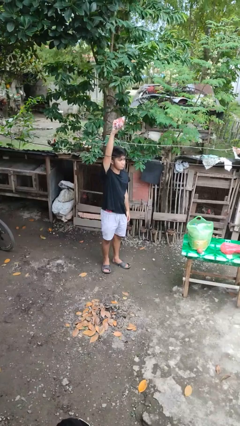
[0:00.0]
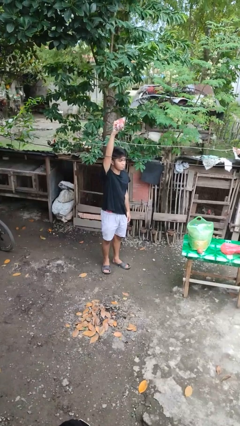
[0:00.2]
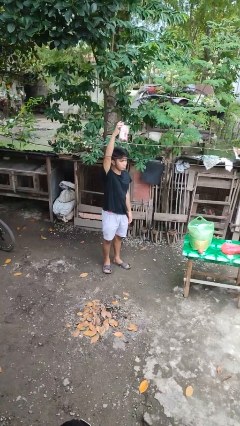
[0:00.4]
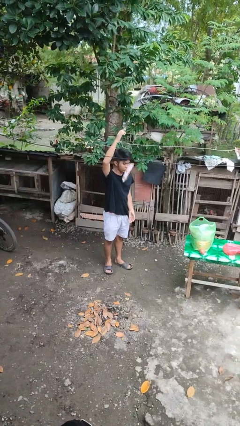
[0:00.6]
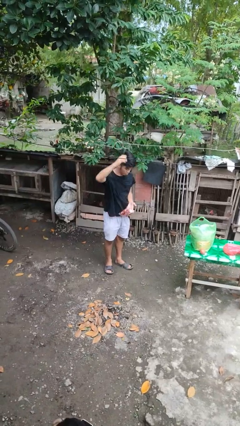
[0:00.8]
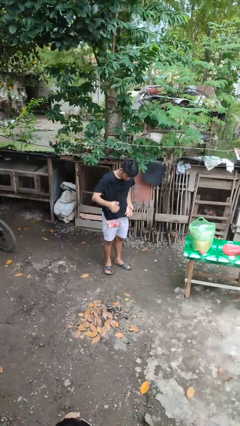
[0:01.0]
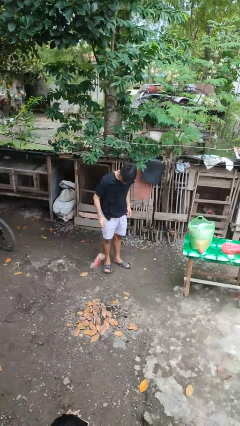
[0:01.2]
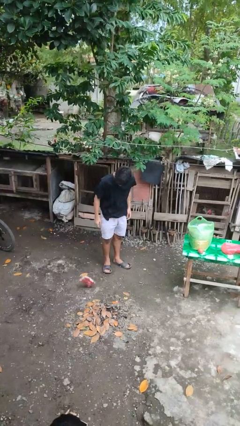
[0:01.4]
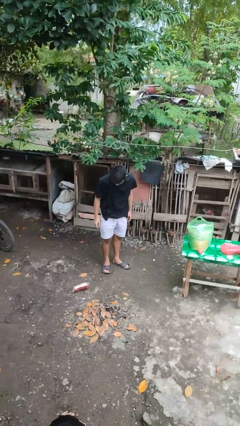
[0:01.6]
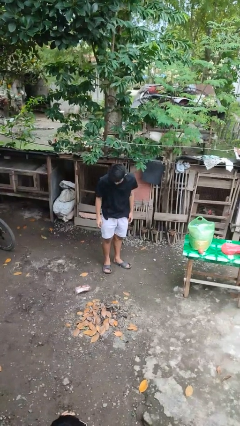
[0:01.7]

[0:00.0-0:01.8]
person drops object

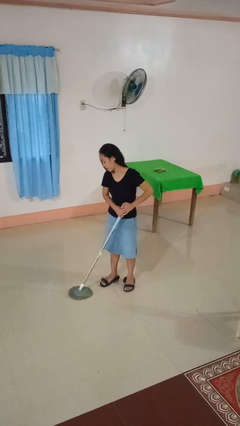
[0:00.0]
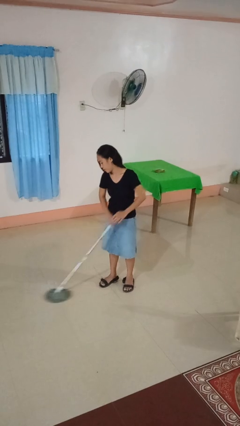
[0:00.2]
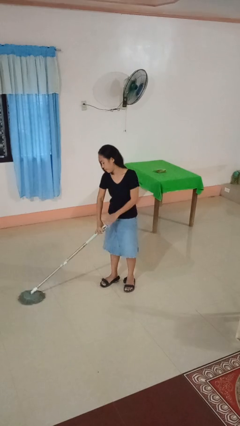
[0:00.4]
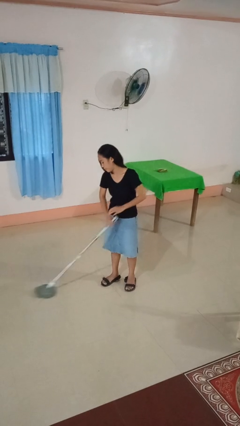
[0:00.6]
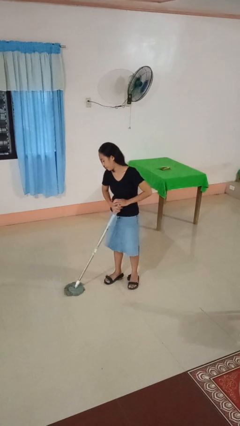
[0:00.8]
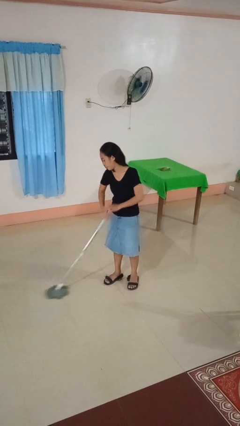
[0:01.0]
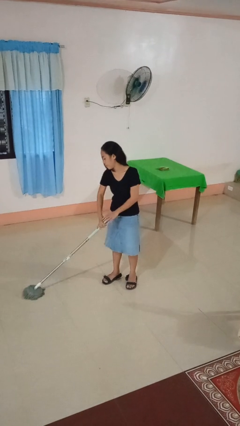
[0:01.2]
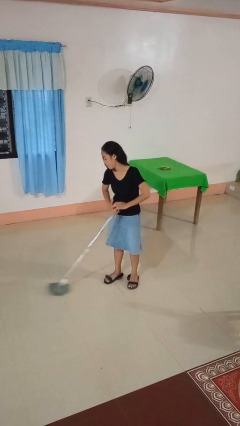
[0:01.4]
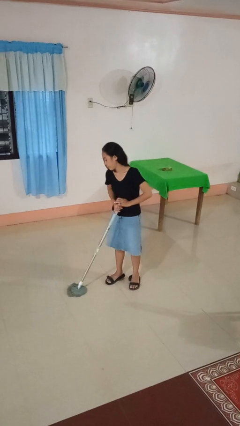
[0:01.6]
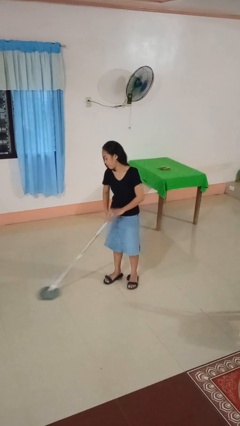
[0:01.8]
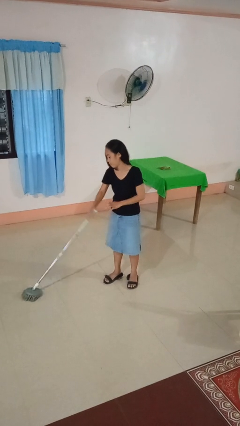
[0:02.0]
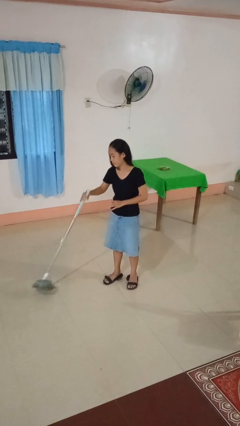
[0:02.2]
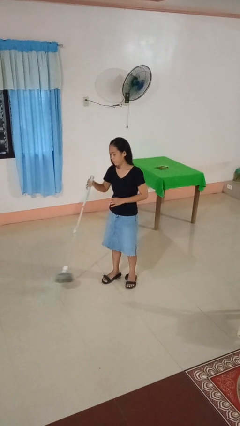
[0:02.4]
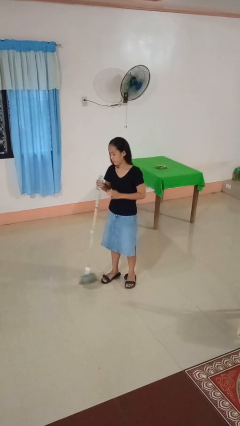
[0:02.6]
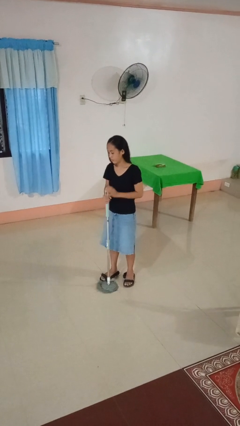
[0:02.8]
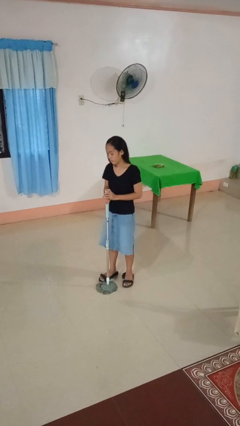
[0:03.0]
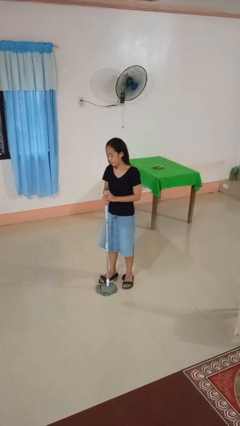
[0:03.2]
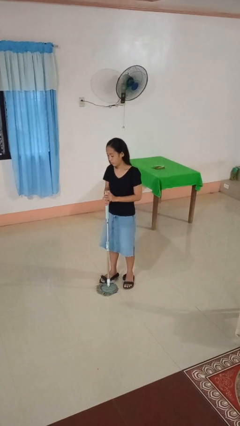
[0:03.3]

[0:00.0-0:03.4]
person mops

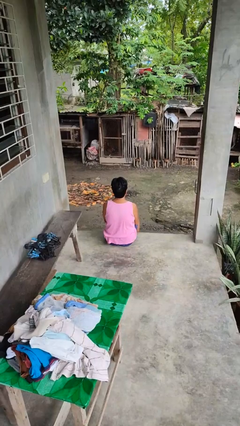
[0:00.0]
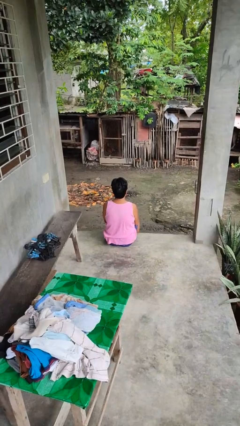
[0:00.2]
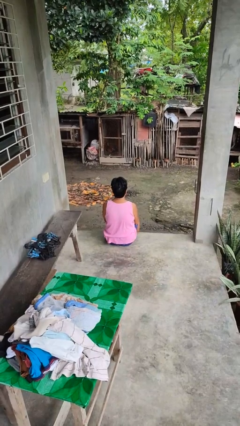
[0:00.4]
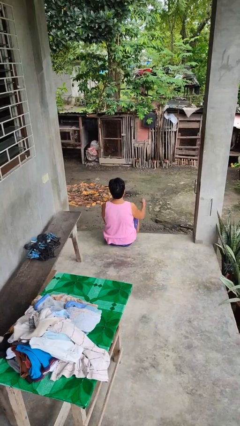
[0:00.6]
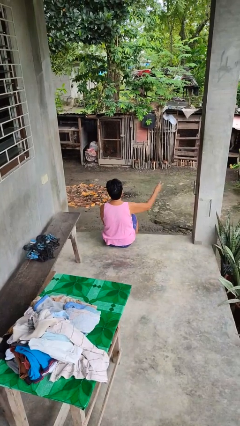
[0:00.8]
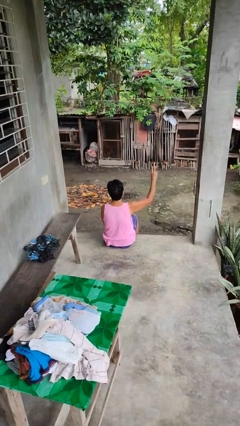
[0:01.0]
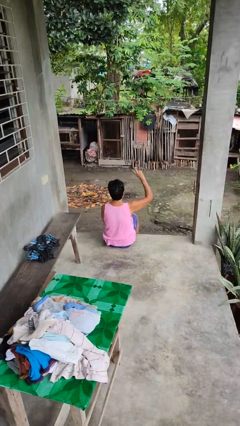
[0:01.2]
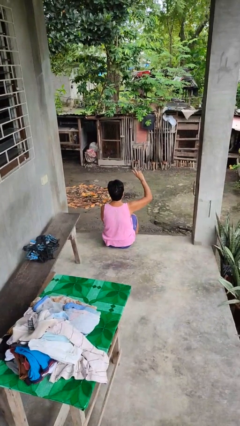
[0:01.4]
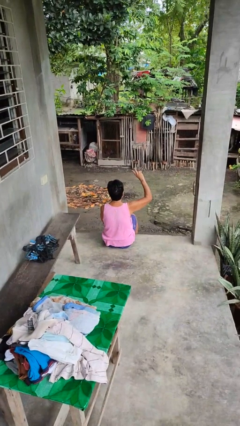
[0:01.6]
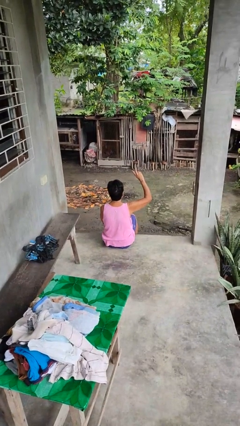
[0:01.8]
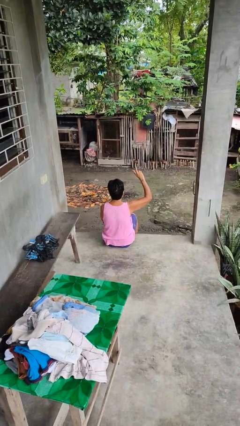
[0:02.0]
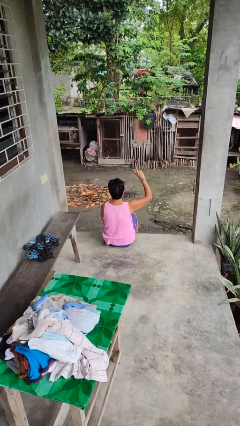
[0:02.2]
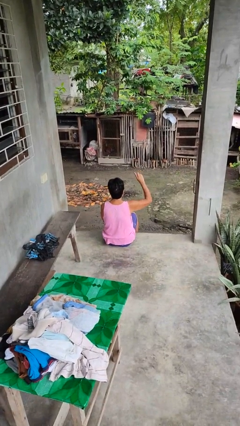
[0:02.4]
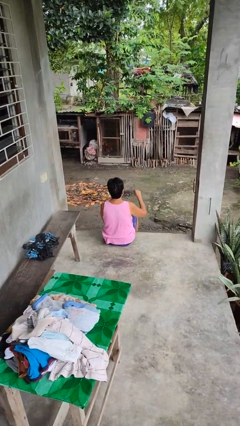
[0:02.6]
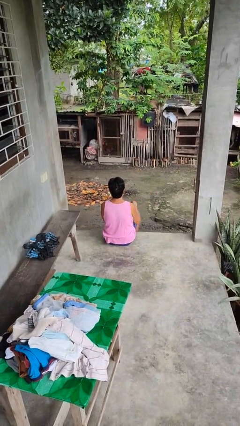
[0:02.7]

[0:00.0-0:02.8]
person gestures peace

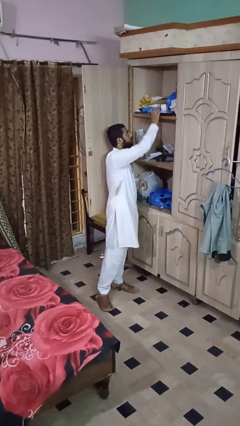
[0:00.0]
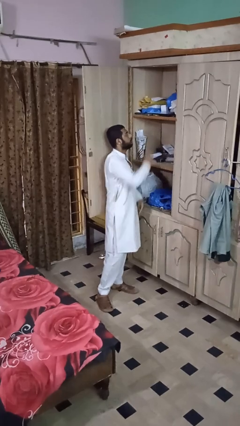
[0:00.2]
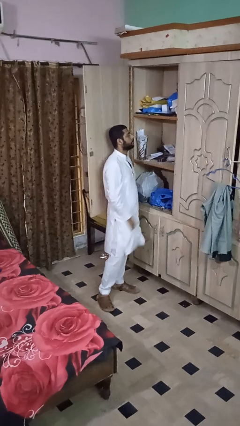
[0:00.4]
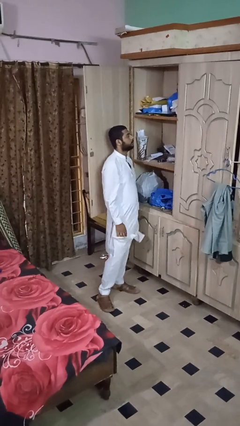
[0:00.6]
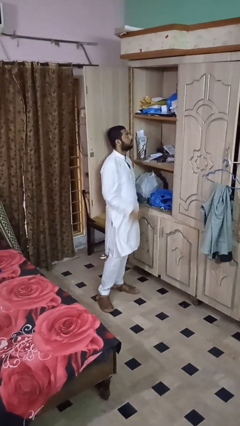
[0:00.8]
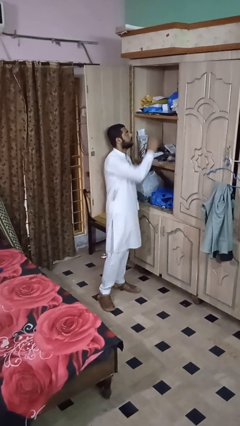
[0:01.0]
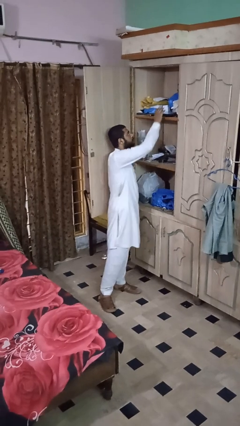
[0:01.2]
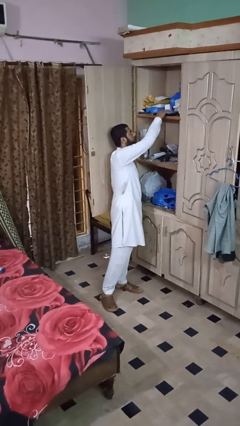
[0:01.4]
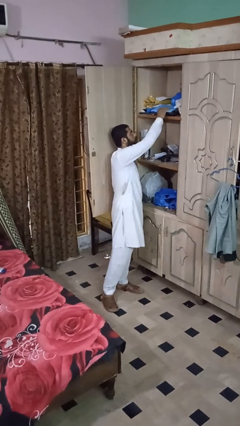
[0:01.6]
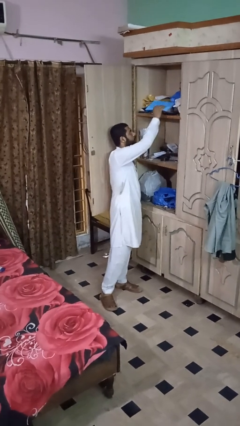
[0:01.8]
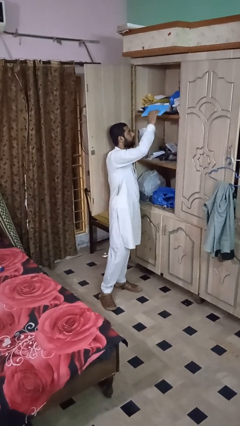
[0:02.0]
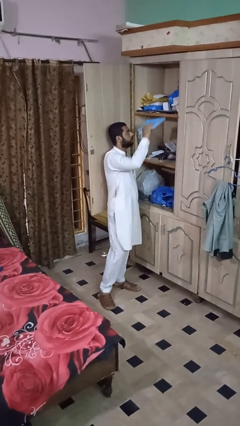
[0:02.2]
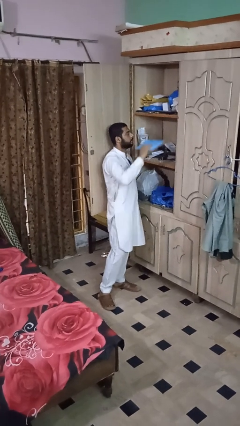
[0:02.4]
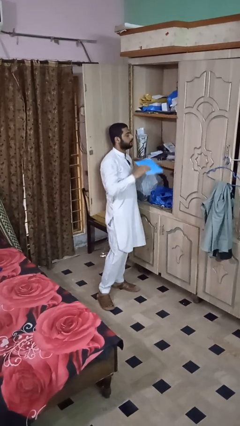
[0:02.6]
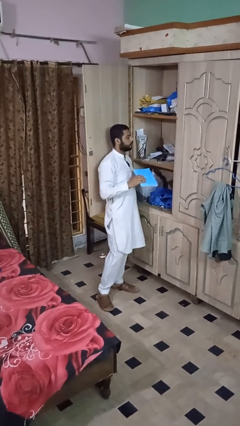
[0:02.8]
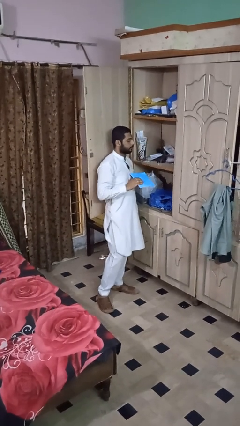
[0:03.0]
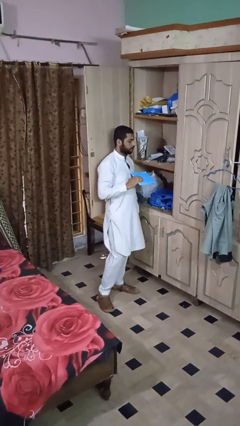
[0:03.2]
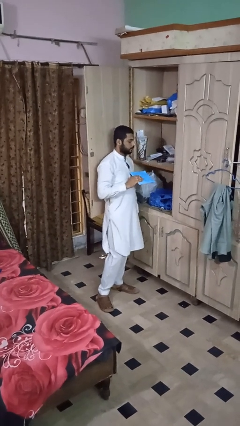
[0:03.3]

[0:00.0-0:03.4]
person picks up object from shelf

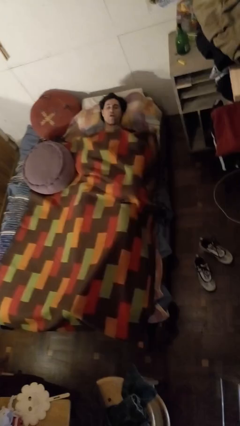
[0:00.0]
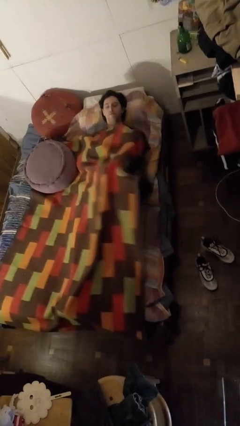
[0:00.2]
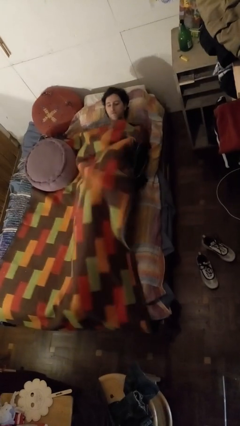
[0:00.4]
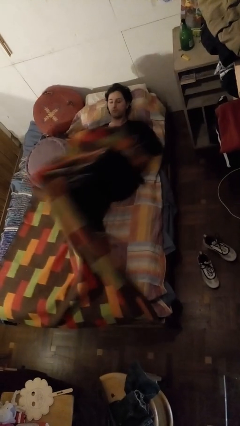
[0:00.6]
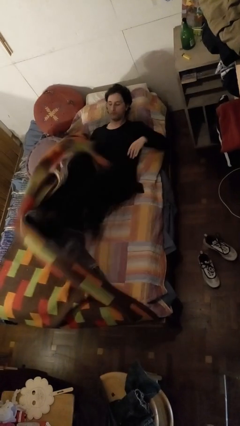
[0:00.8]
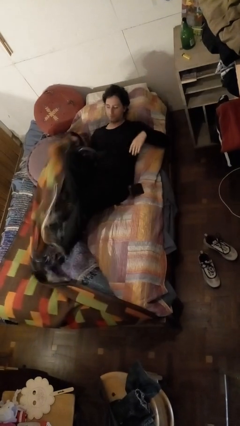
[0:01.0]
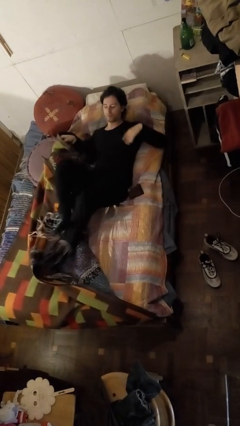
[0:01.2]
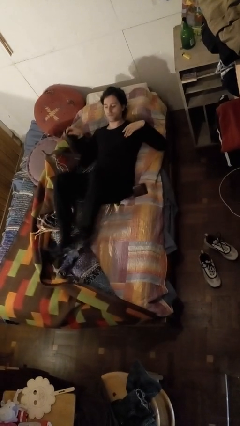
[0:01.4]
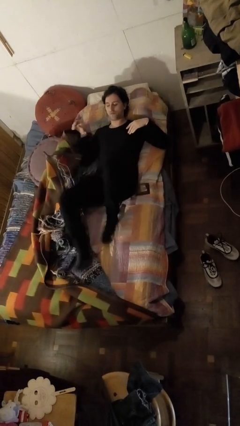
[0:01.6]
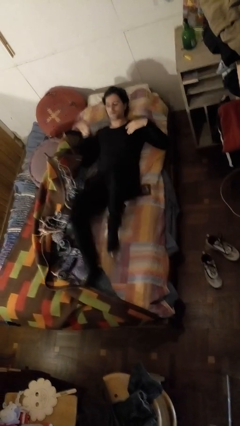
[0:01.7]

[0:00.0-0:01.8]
person uncovers with bedsheets

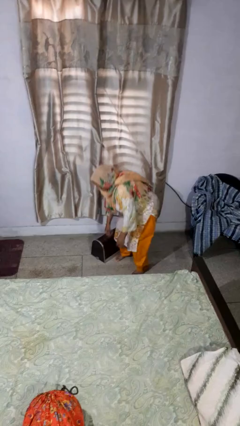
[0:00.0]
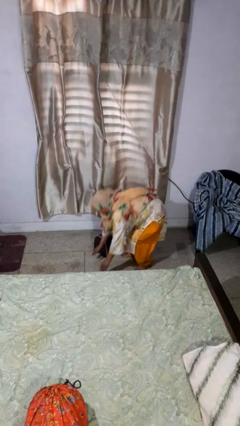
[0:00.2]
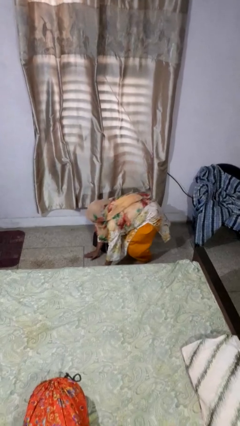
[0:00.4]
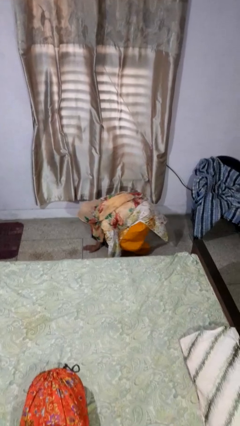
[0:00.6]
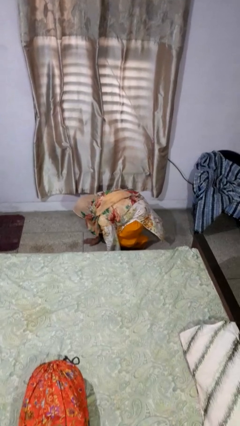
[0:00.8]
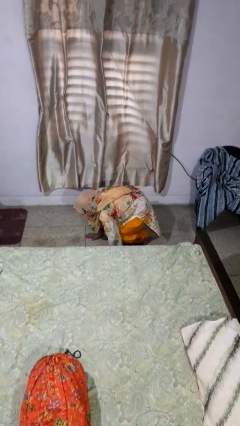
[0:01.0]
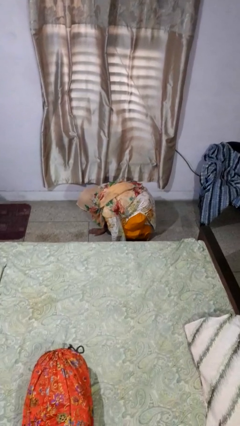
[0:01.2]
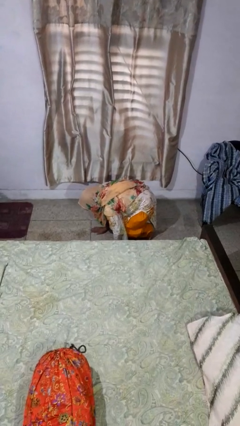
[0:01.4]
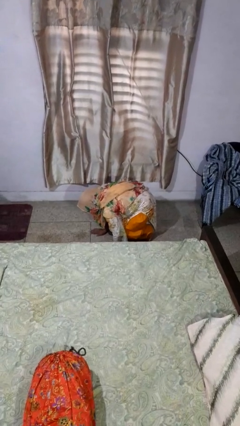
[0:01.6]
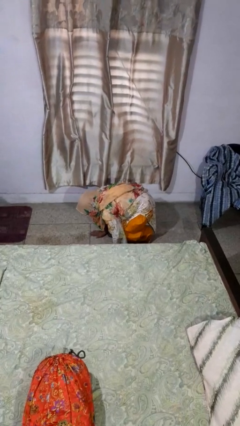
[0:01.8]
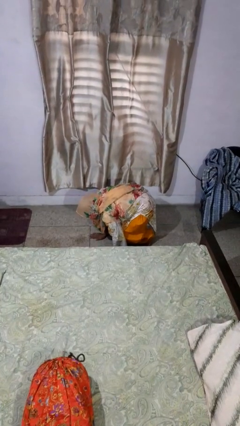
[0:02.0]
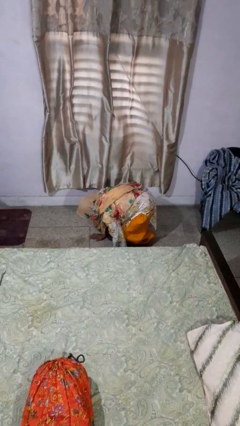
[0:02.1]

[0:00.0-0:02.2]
person lies down on floor

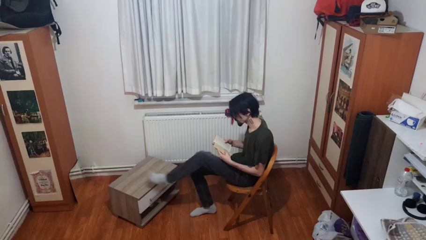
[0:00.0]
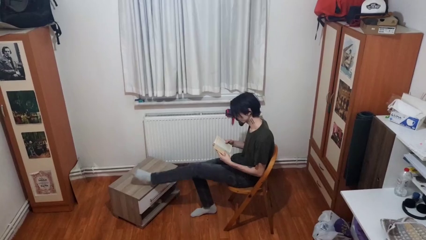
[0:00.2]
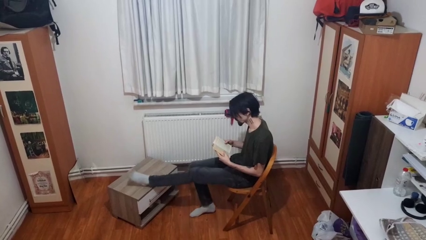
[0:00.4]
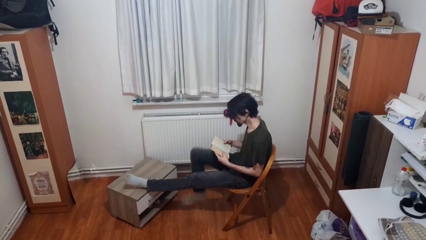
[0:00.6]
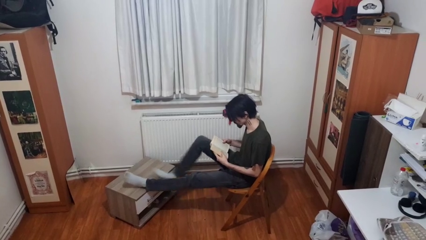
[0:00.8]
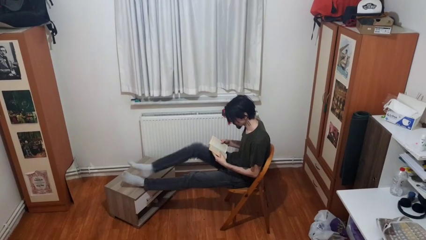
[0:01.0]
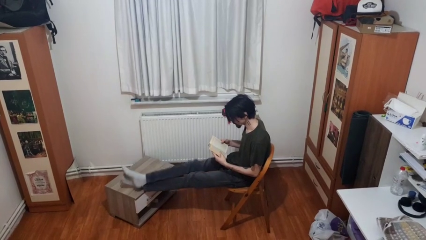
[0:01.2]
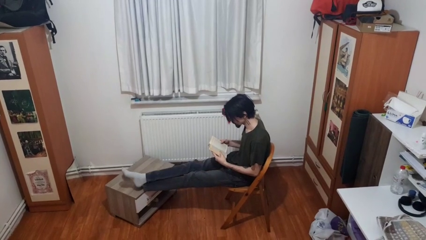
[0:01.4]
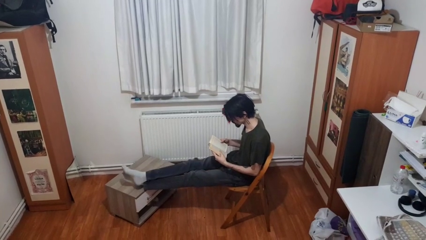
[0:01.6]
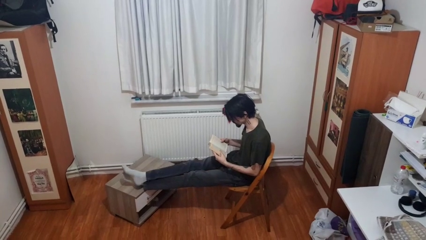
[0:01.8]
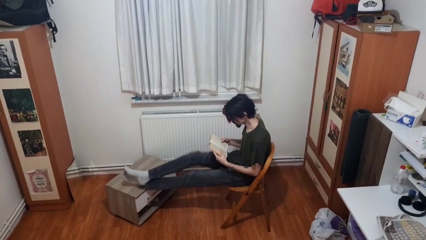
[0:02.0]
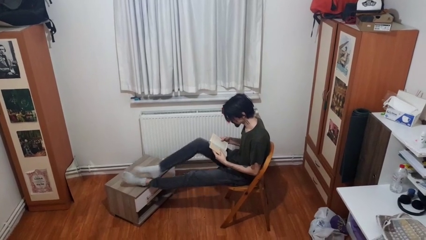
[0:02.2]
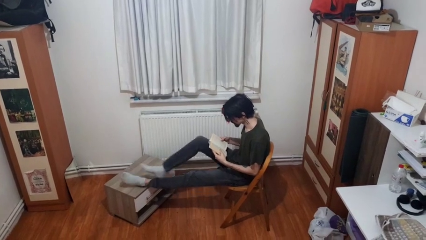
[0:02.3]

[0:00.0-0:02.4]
person puts feet up
